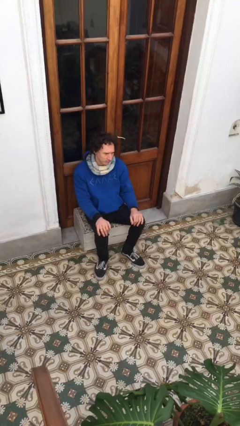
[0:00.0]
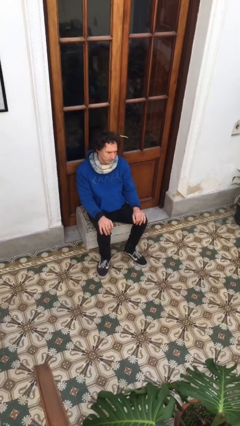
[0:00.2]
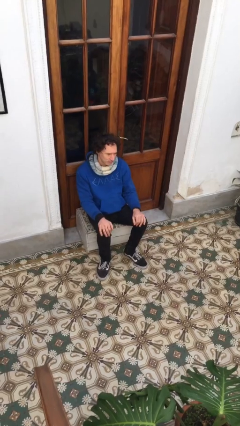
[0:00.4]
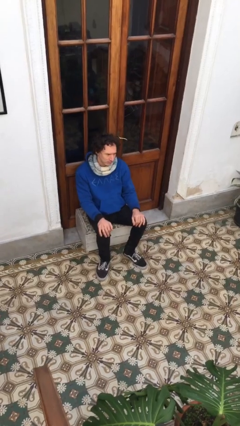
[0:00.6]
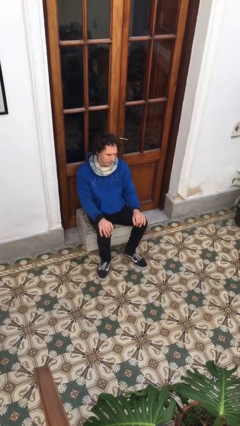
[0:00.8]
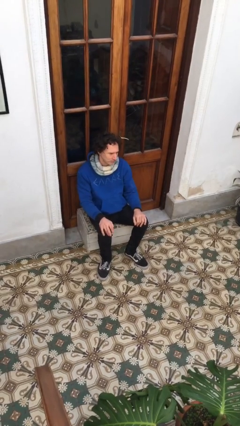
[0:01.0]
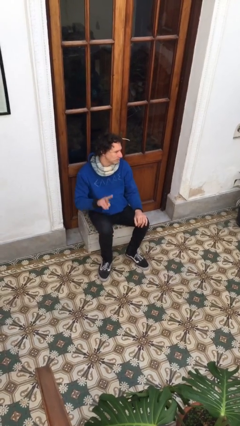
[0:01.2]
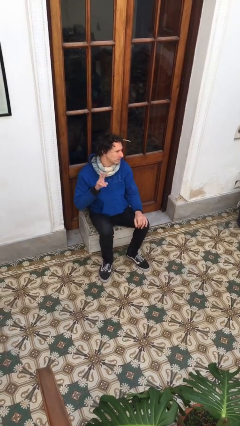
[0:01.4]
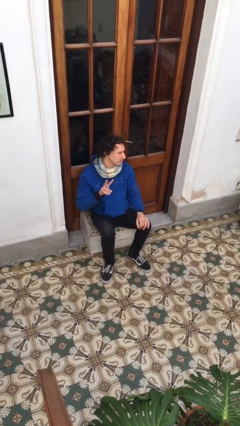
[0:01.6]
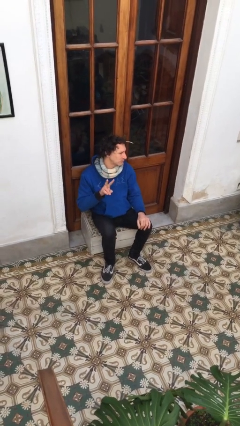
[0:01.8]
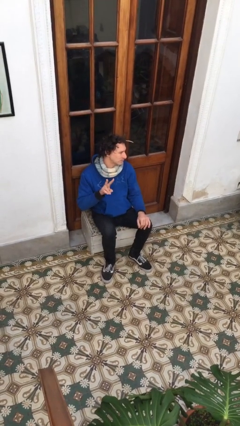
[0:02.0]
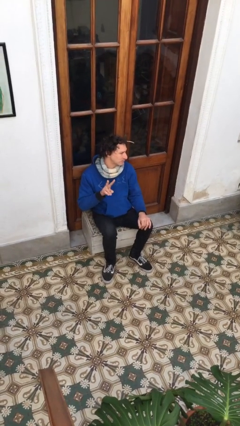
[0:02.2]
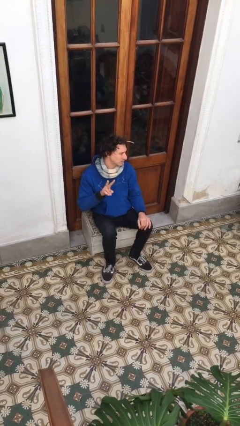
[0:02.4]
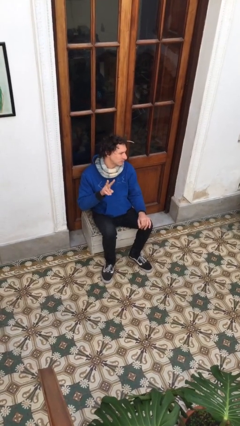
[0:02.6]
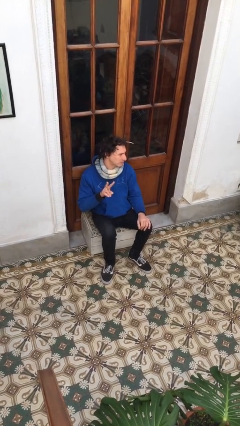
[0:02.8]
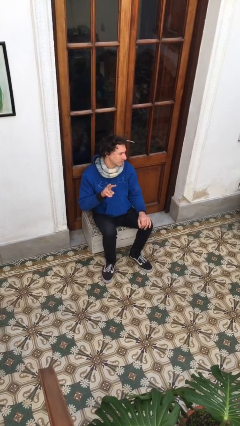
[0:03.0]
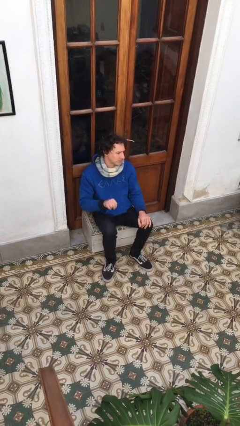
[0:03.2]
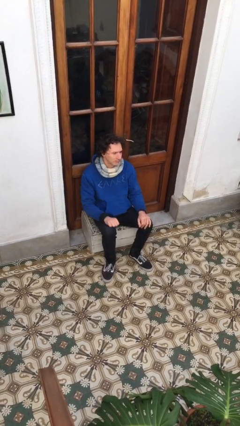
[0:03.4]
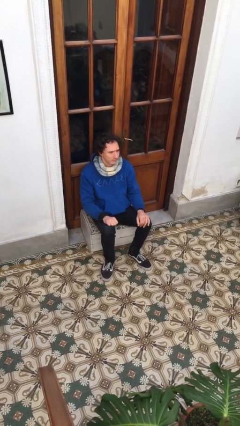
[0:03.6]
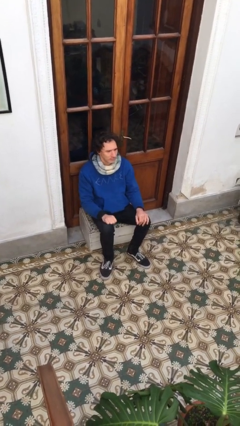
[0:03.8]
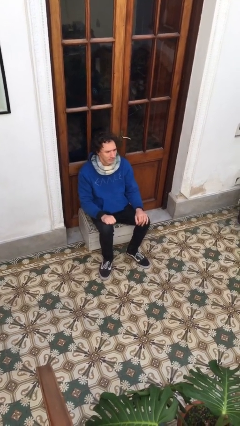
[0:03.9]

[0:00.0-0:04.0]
person gestures peace

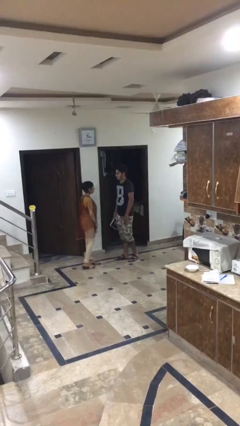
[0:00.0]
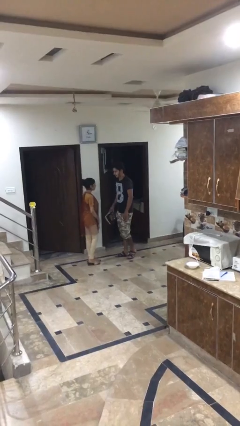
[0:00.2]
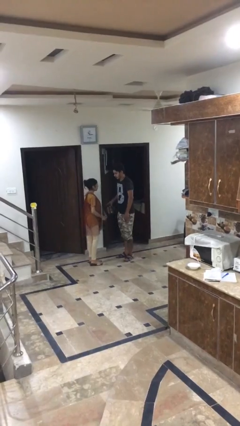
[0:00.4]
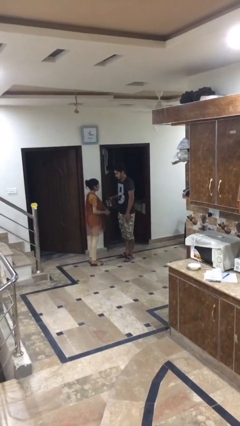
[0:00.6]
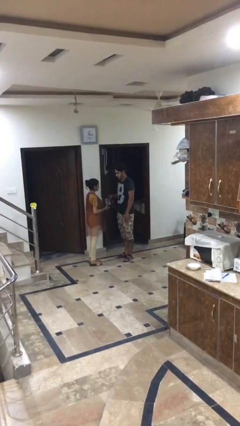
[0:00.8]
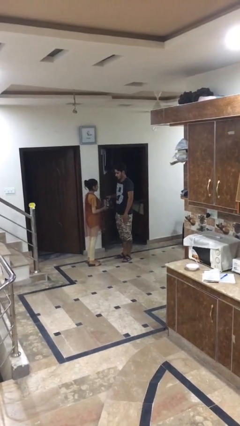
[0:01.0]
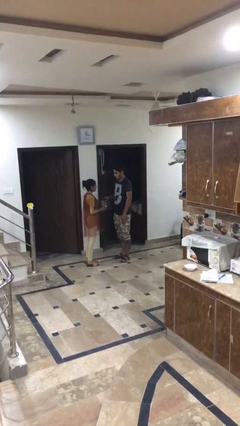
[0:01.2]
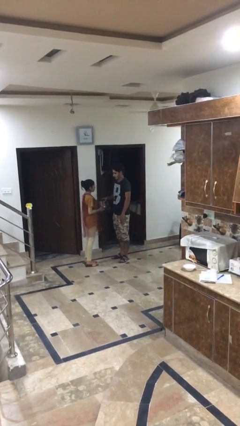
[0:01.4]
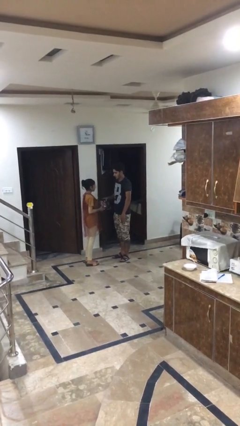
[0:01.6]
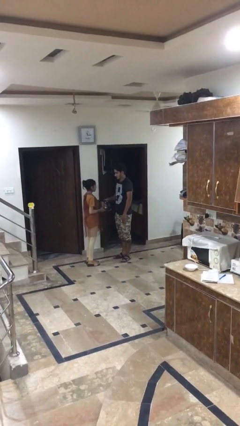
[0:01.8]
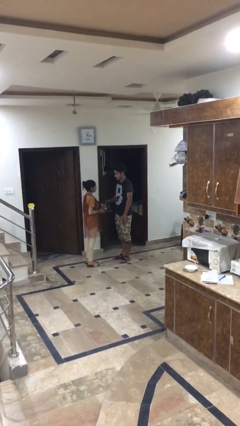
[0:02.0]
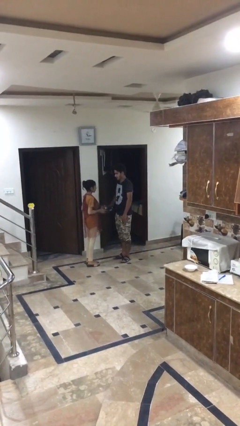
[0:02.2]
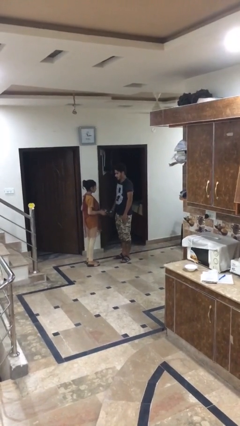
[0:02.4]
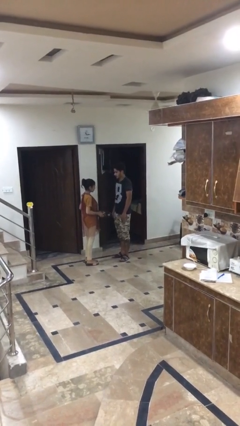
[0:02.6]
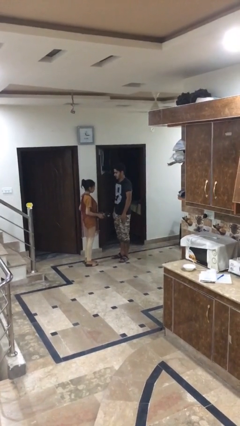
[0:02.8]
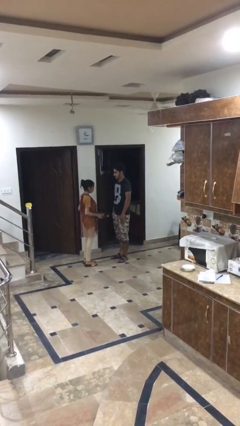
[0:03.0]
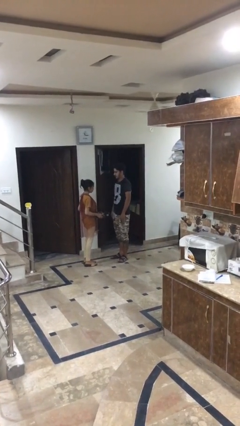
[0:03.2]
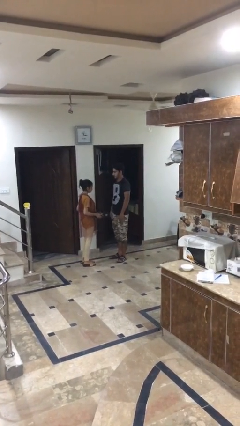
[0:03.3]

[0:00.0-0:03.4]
person transfers object to person

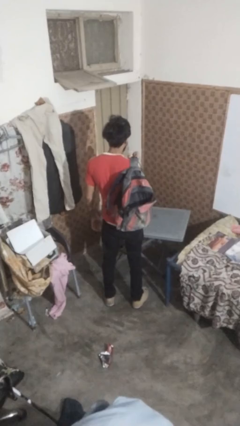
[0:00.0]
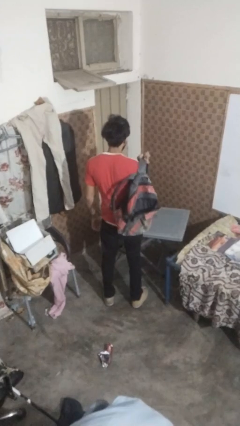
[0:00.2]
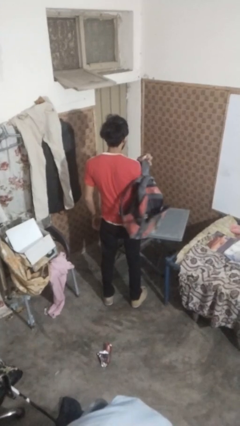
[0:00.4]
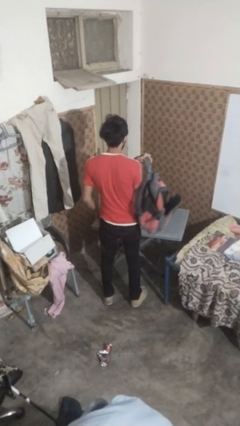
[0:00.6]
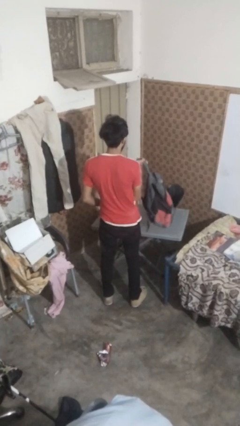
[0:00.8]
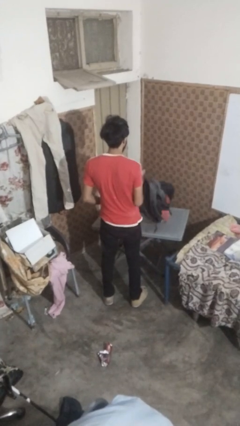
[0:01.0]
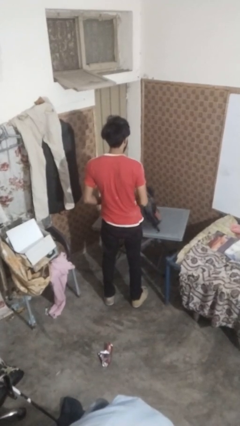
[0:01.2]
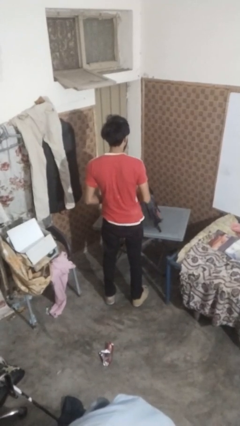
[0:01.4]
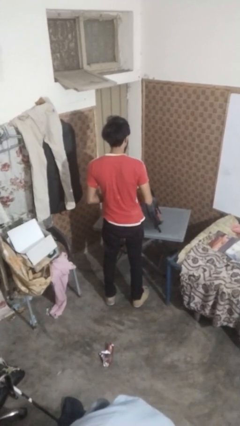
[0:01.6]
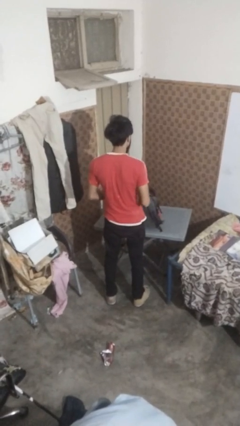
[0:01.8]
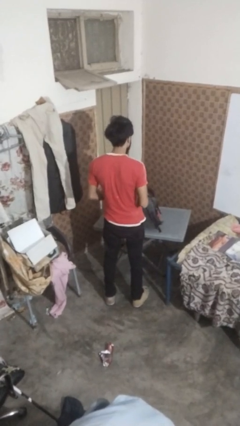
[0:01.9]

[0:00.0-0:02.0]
person takes off backpack

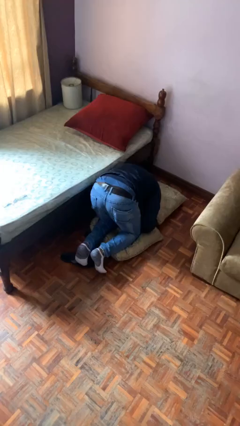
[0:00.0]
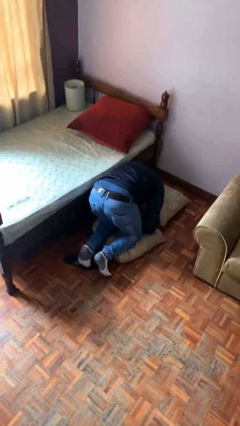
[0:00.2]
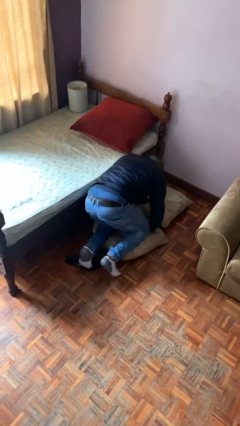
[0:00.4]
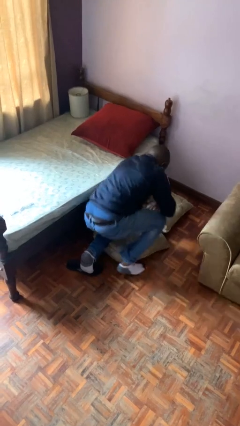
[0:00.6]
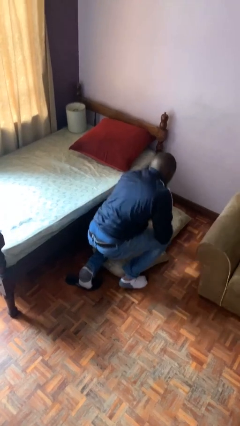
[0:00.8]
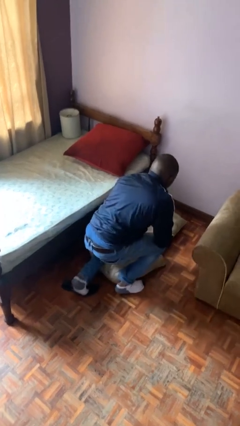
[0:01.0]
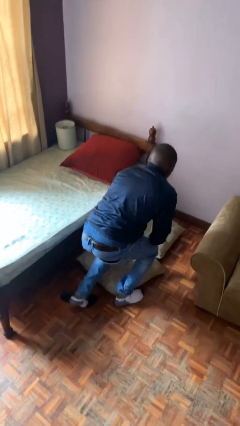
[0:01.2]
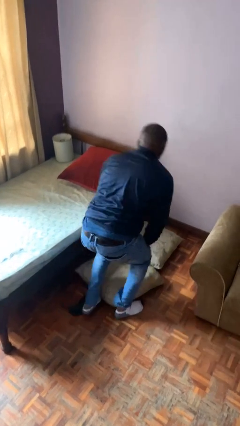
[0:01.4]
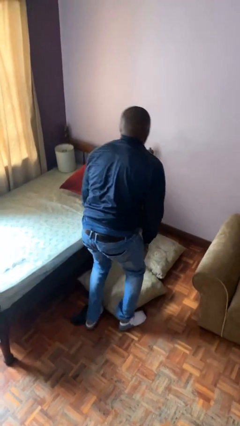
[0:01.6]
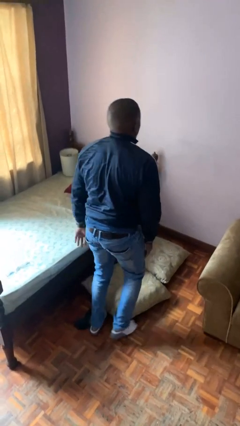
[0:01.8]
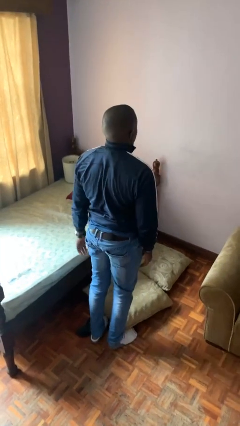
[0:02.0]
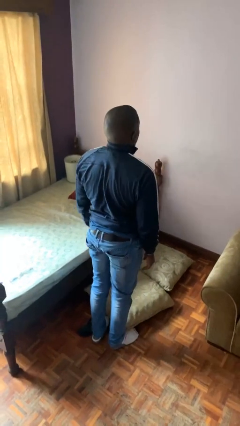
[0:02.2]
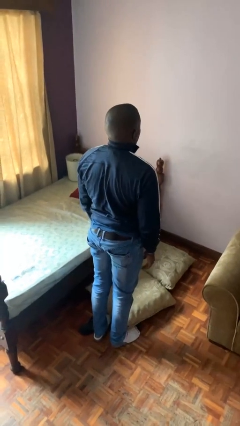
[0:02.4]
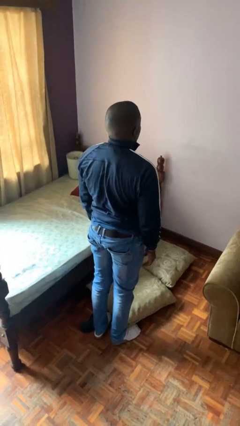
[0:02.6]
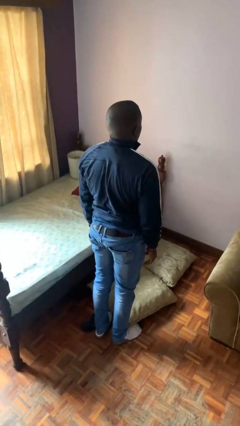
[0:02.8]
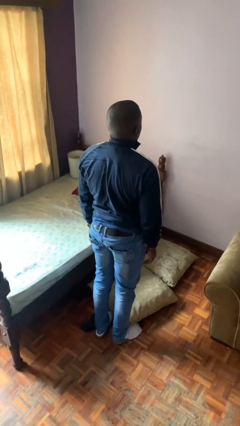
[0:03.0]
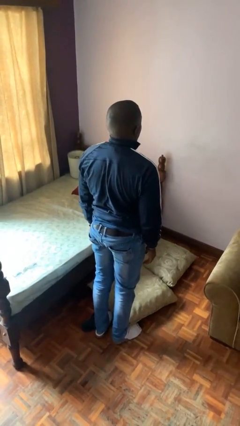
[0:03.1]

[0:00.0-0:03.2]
person stands up from floor

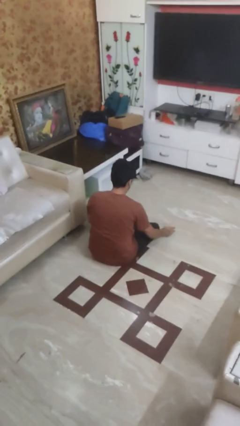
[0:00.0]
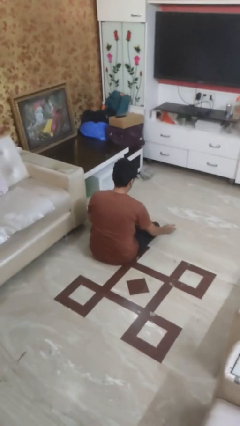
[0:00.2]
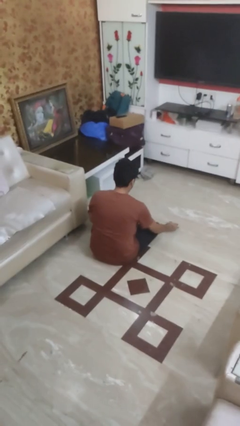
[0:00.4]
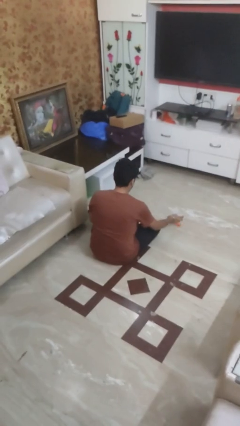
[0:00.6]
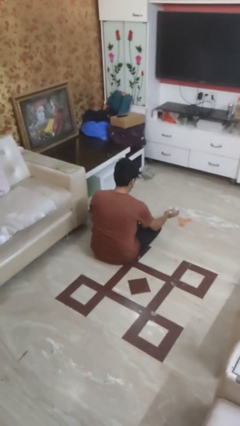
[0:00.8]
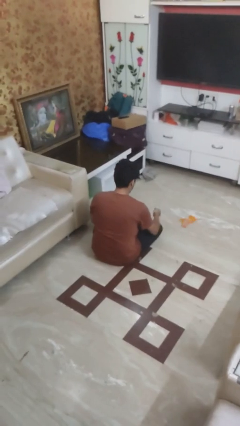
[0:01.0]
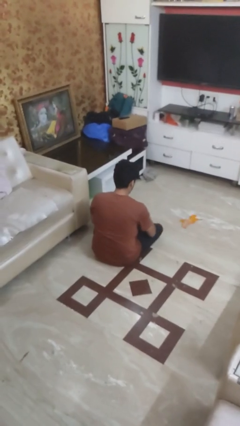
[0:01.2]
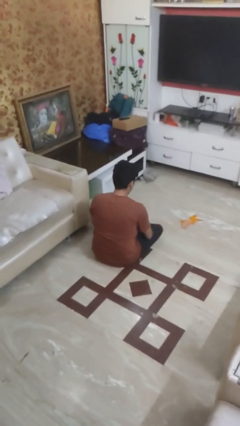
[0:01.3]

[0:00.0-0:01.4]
person spills on floor

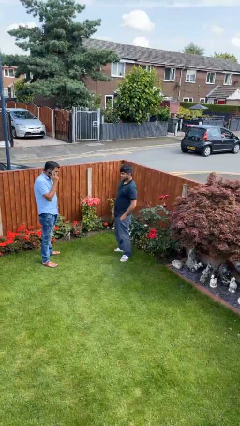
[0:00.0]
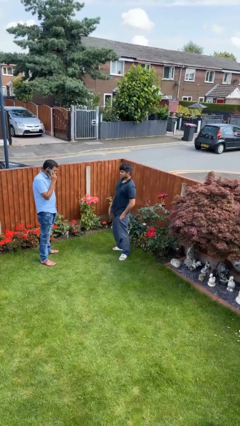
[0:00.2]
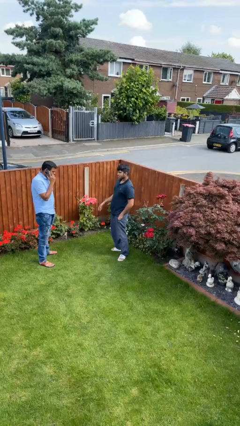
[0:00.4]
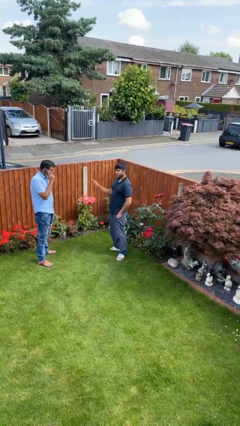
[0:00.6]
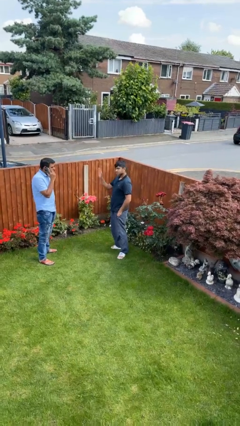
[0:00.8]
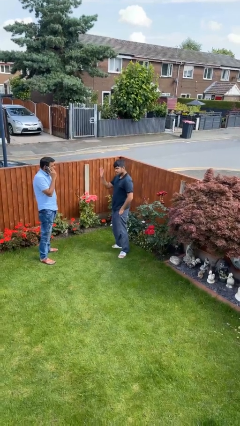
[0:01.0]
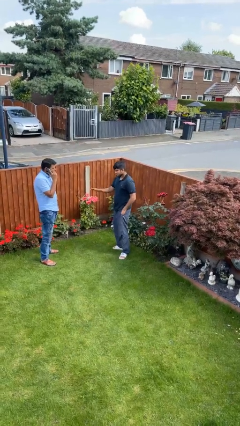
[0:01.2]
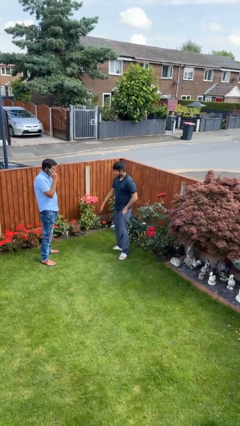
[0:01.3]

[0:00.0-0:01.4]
person waves at person

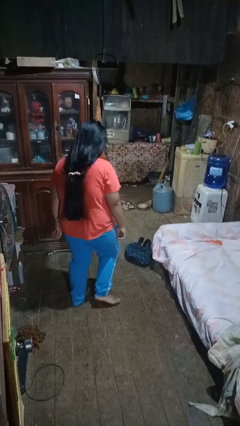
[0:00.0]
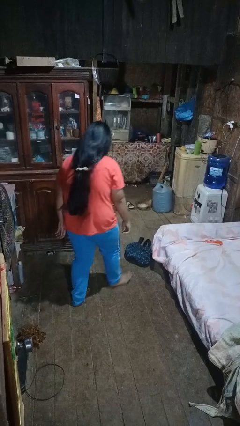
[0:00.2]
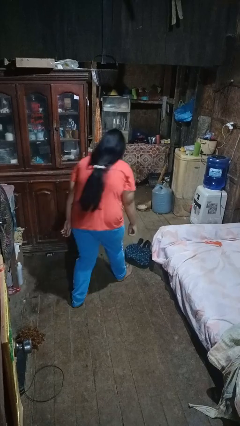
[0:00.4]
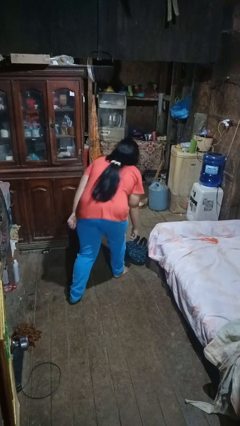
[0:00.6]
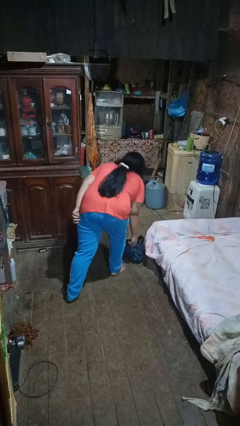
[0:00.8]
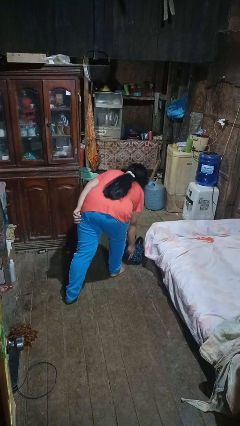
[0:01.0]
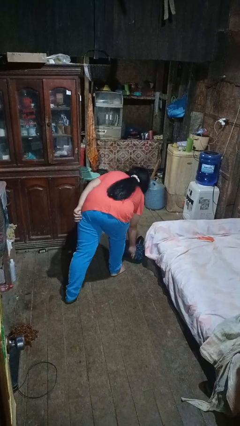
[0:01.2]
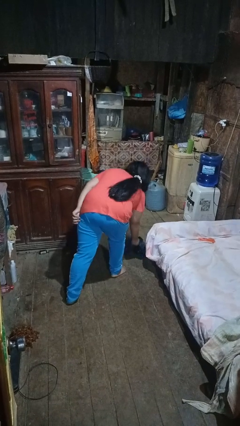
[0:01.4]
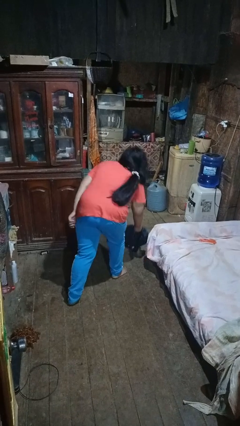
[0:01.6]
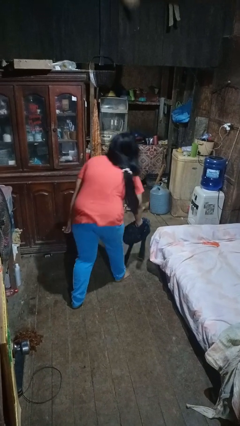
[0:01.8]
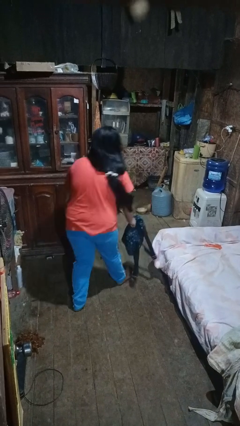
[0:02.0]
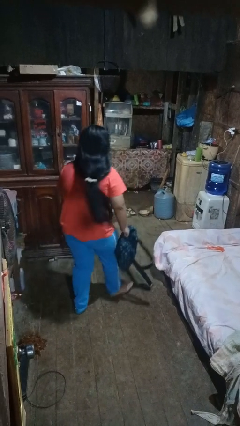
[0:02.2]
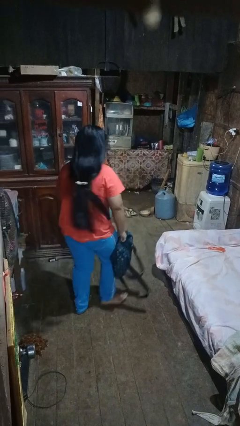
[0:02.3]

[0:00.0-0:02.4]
person picks up object from floor
